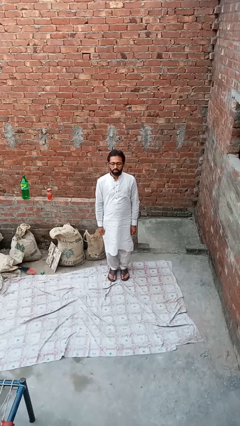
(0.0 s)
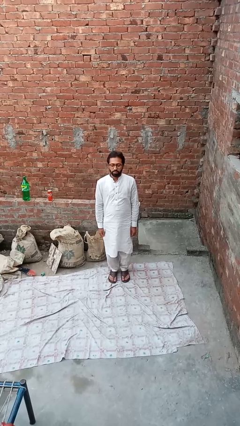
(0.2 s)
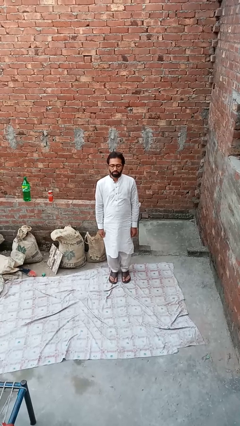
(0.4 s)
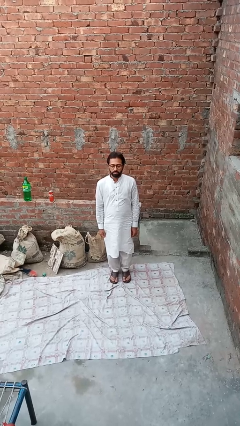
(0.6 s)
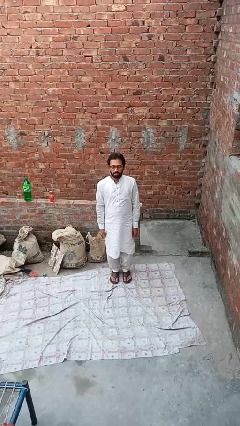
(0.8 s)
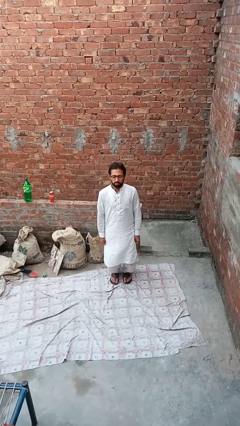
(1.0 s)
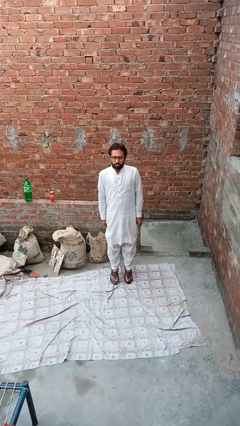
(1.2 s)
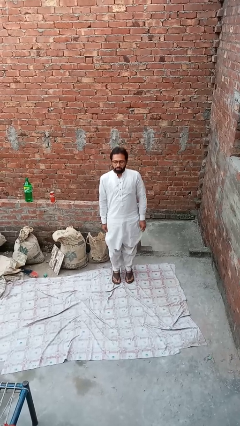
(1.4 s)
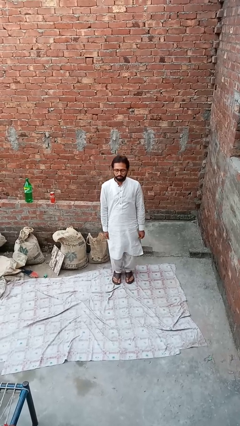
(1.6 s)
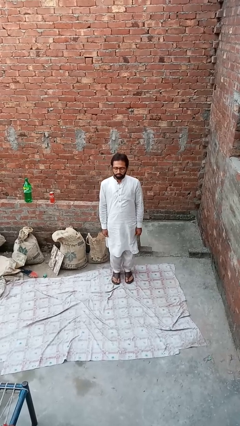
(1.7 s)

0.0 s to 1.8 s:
person exercises with jumping jacks

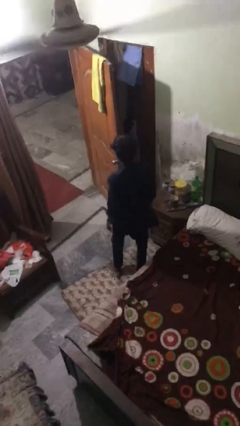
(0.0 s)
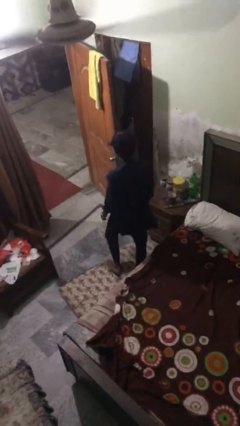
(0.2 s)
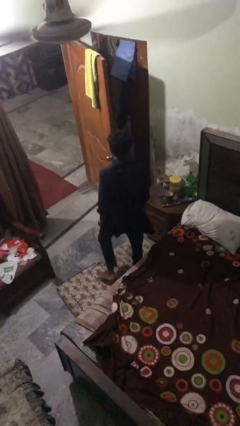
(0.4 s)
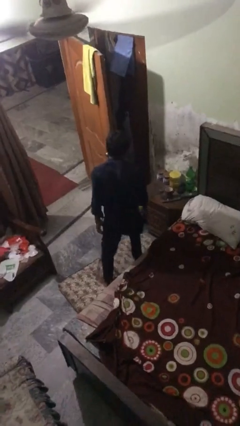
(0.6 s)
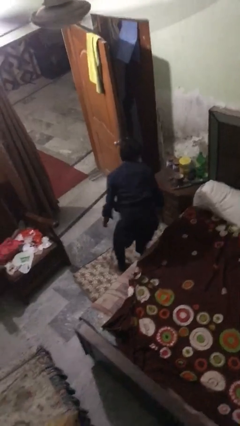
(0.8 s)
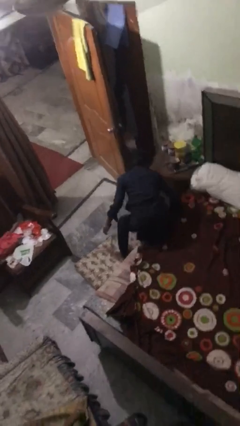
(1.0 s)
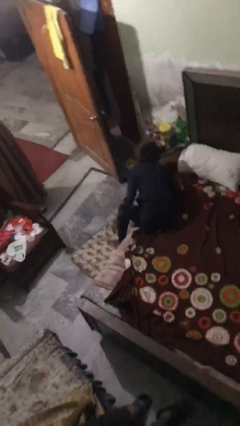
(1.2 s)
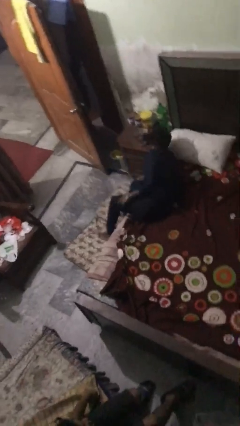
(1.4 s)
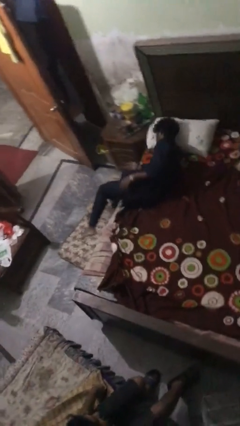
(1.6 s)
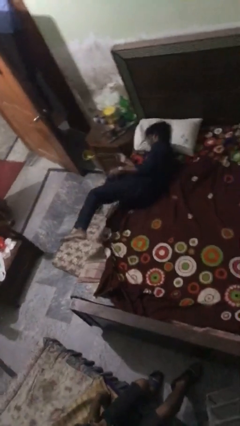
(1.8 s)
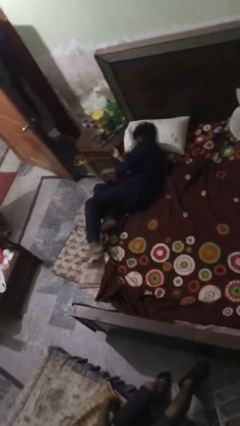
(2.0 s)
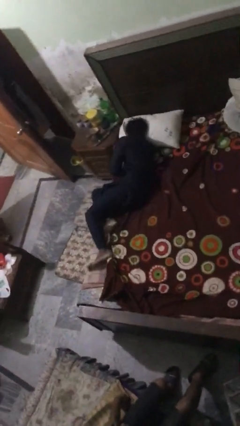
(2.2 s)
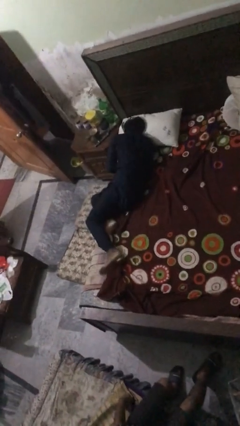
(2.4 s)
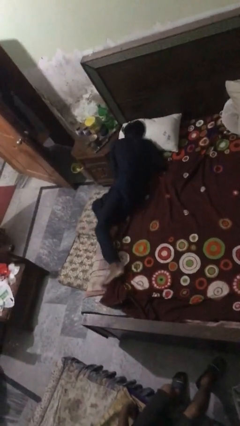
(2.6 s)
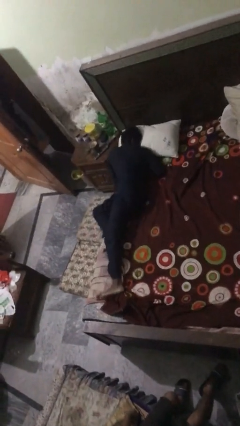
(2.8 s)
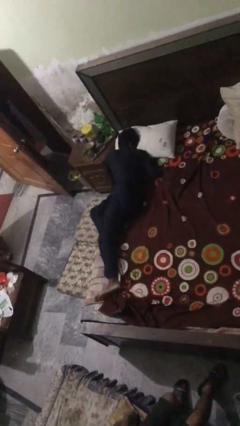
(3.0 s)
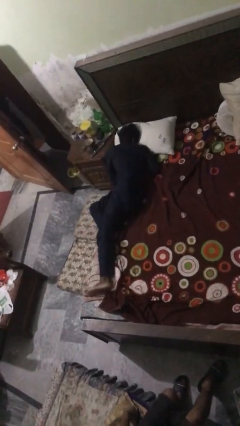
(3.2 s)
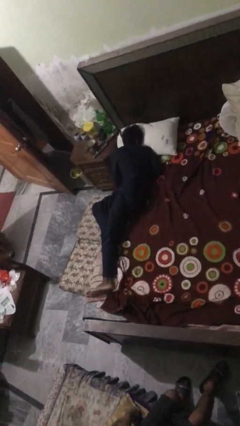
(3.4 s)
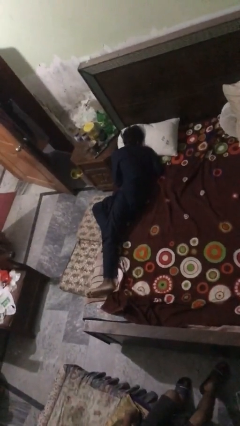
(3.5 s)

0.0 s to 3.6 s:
person lies down on bed

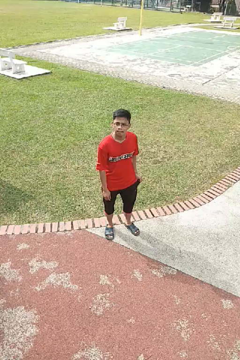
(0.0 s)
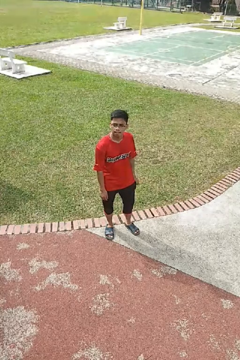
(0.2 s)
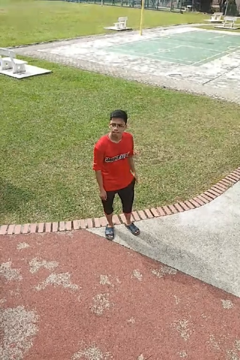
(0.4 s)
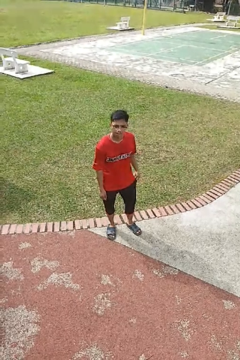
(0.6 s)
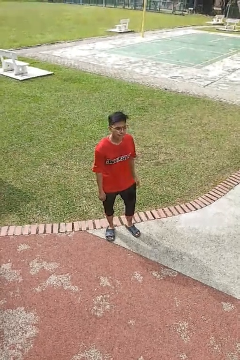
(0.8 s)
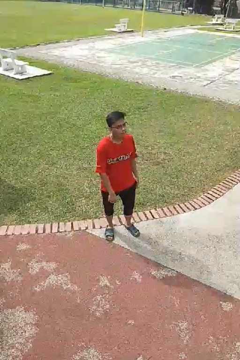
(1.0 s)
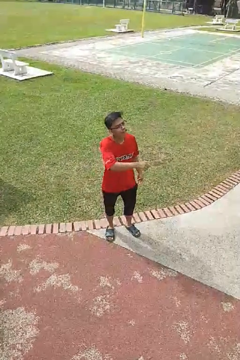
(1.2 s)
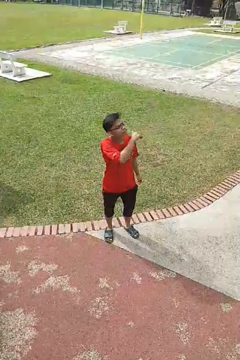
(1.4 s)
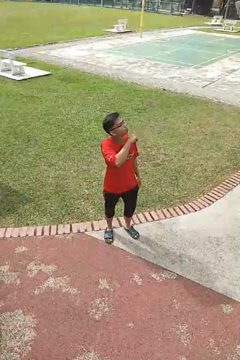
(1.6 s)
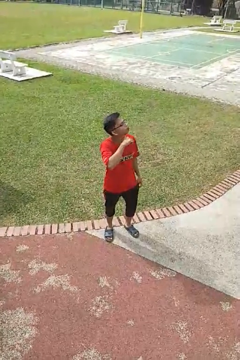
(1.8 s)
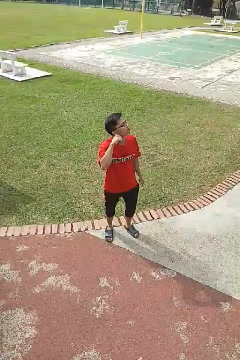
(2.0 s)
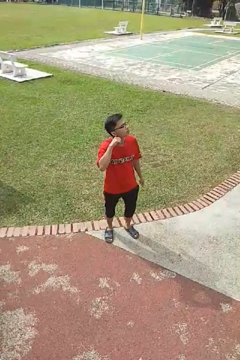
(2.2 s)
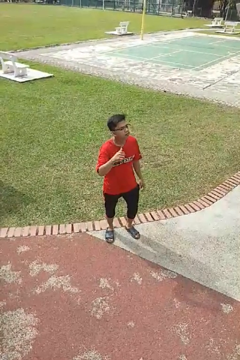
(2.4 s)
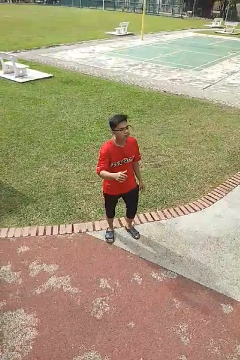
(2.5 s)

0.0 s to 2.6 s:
person gestures cut

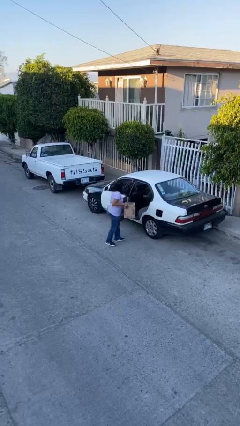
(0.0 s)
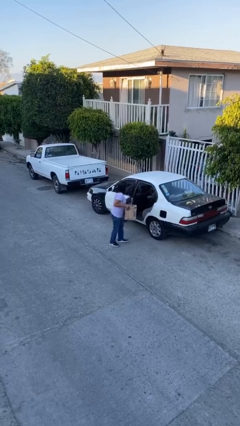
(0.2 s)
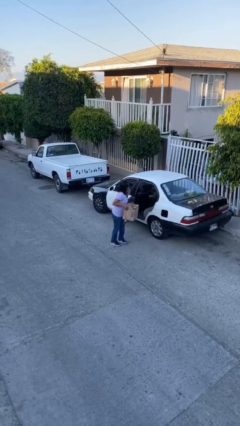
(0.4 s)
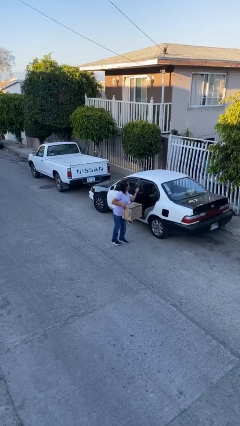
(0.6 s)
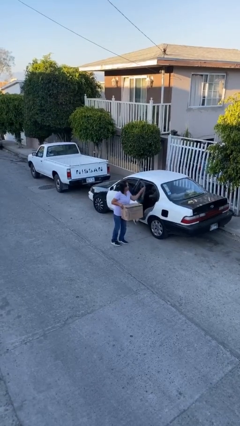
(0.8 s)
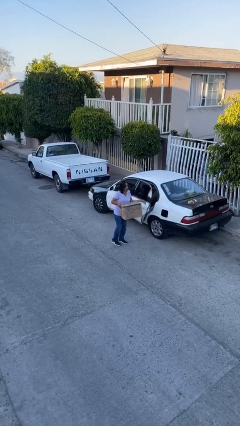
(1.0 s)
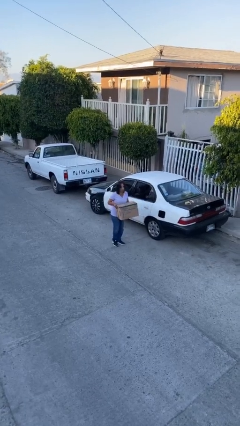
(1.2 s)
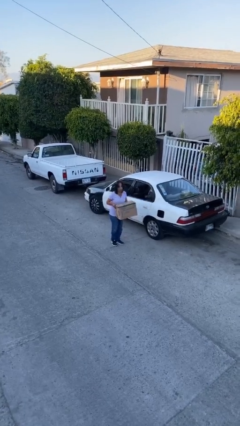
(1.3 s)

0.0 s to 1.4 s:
person closes car door

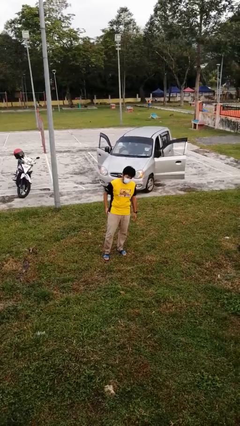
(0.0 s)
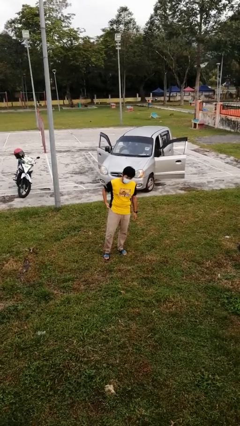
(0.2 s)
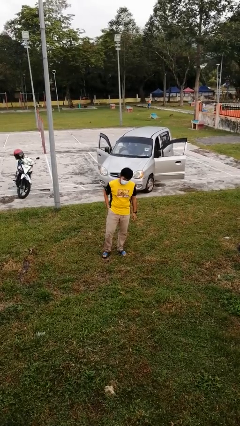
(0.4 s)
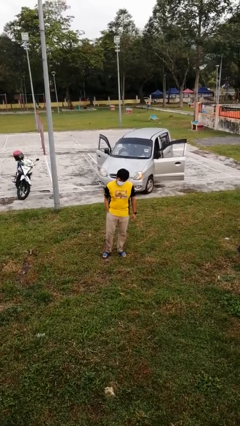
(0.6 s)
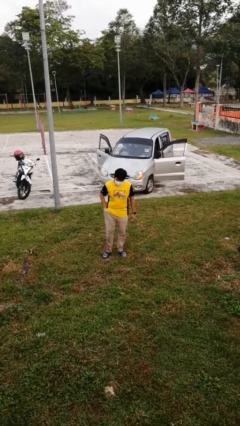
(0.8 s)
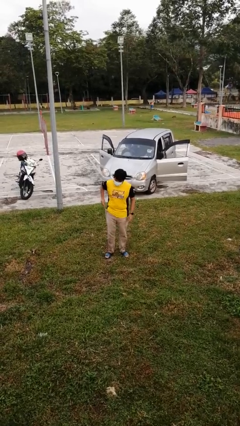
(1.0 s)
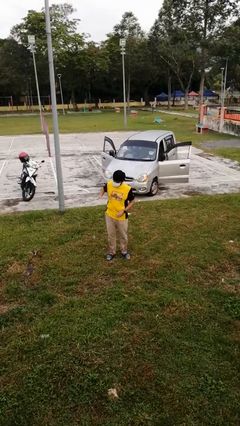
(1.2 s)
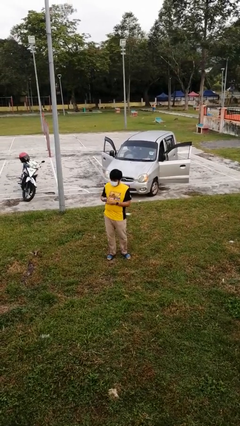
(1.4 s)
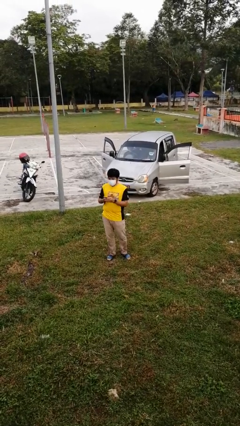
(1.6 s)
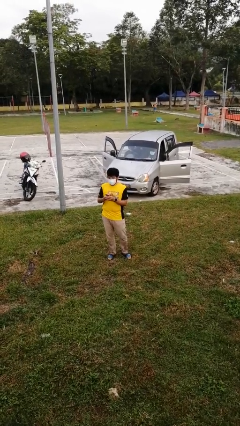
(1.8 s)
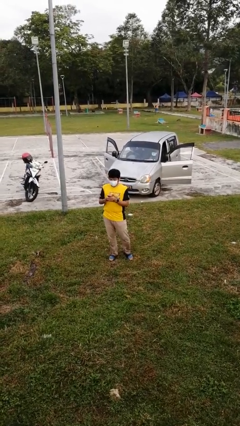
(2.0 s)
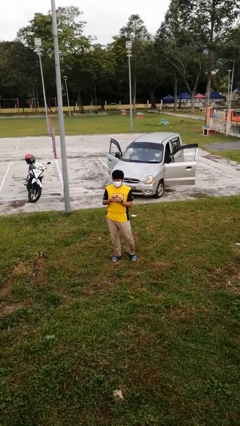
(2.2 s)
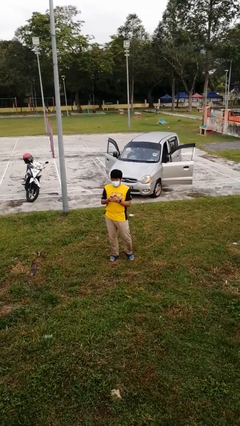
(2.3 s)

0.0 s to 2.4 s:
person takes phone from pocket

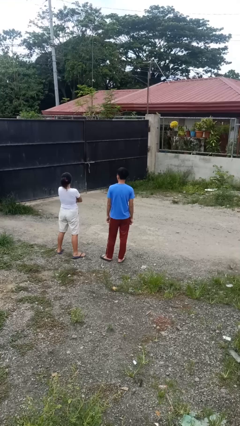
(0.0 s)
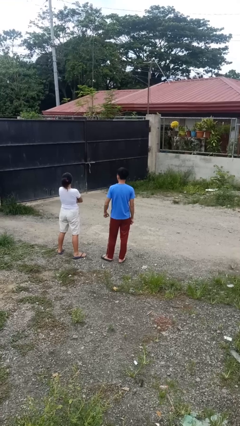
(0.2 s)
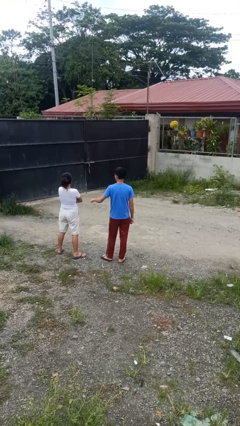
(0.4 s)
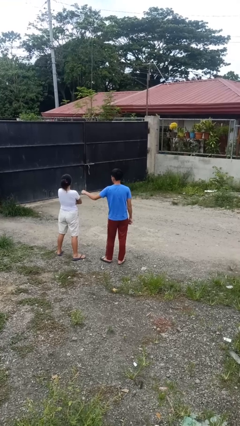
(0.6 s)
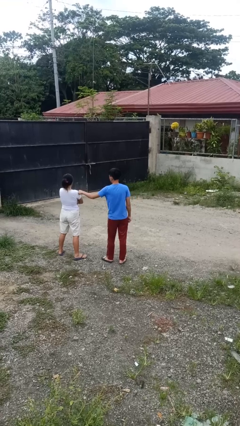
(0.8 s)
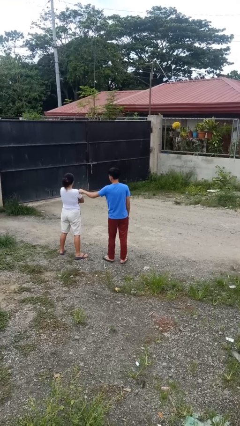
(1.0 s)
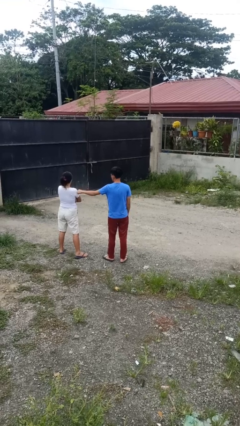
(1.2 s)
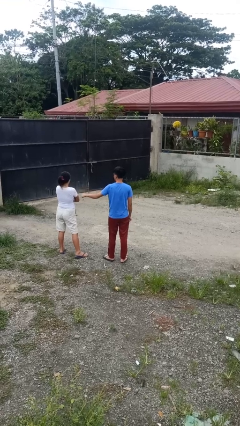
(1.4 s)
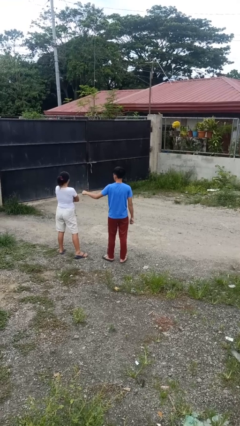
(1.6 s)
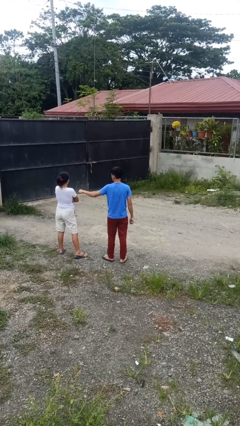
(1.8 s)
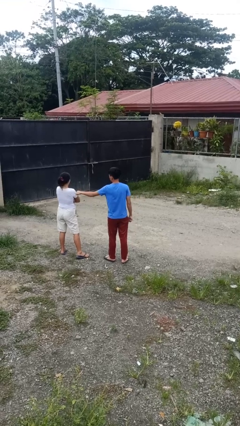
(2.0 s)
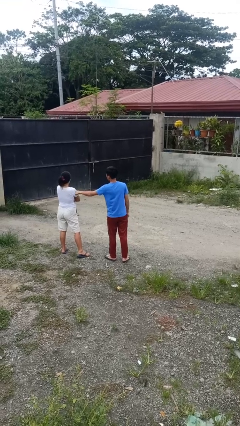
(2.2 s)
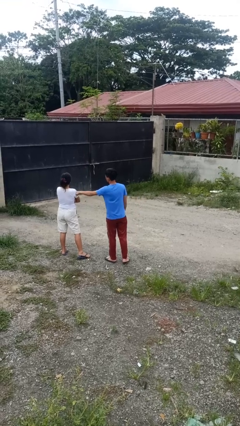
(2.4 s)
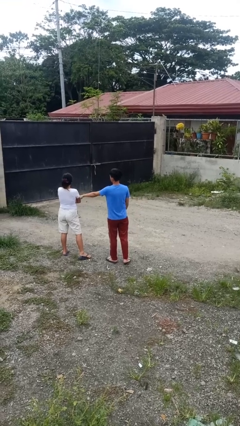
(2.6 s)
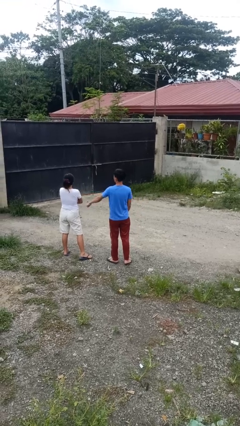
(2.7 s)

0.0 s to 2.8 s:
person pounds shoulders of person

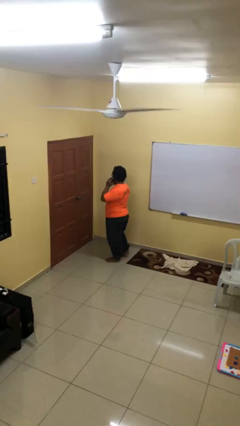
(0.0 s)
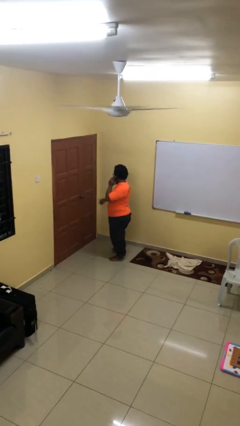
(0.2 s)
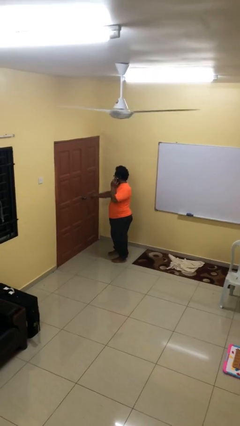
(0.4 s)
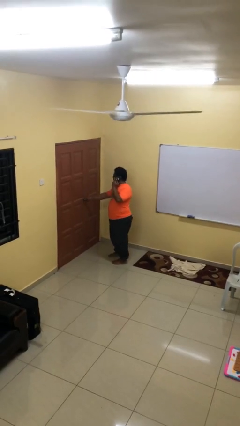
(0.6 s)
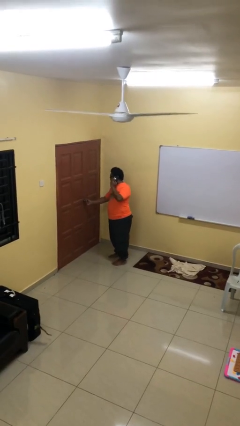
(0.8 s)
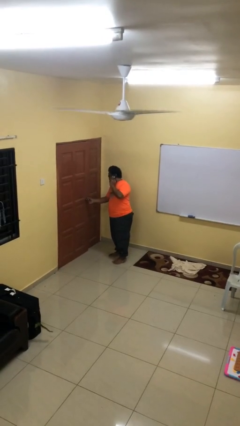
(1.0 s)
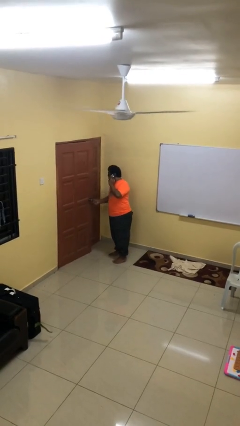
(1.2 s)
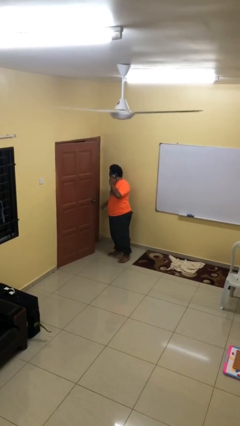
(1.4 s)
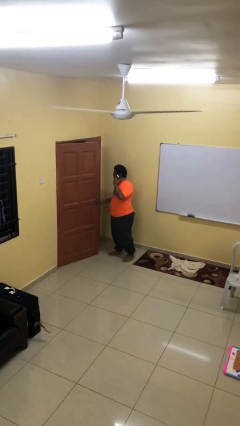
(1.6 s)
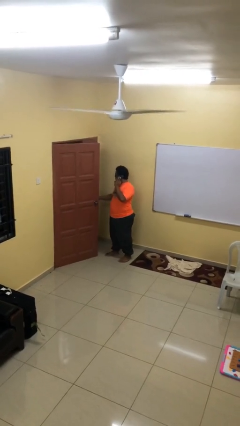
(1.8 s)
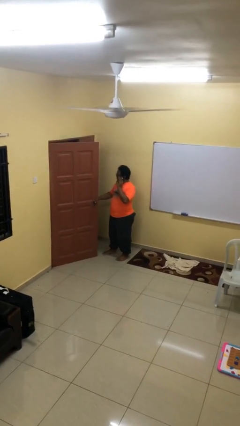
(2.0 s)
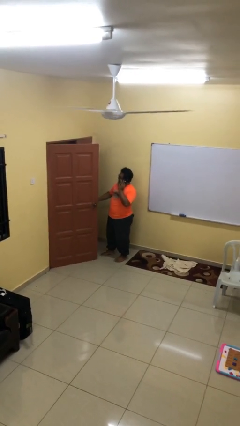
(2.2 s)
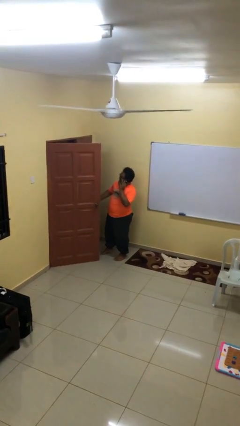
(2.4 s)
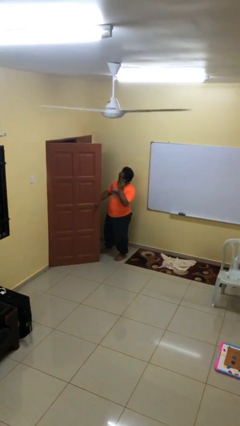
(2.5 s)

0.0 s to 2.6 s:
person opens facility door
